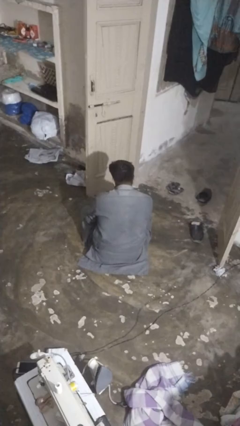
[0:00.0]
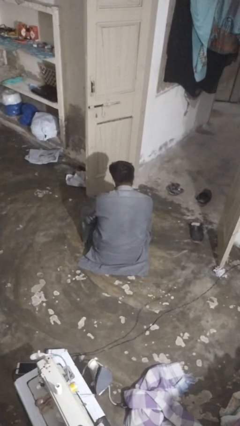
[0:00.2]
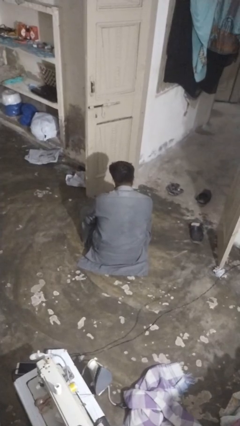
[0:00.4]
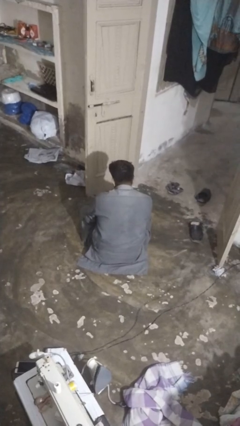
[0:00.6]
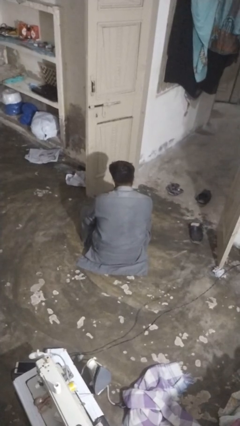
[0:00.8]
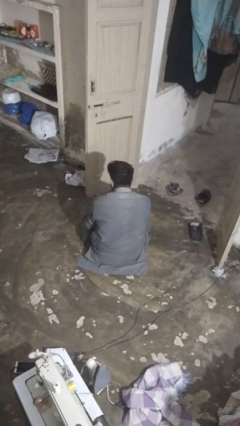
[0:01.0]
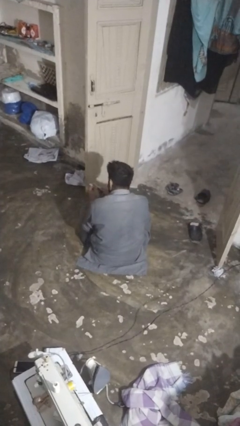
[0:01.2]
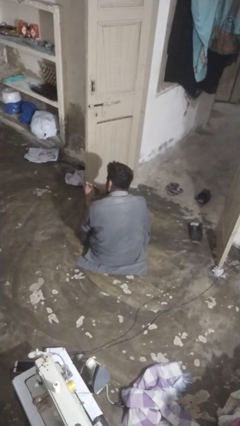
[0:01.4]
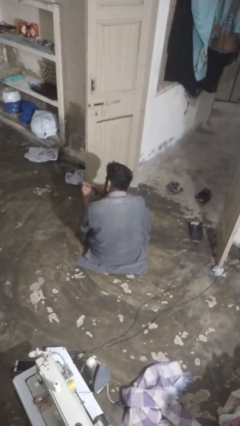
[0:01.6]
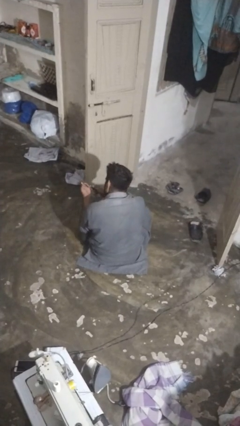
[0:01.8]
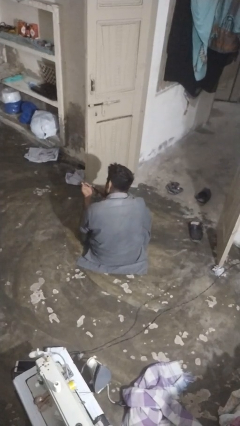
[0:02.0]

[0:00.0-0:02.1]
person files fingernails

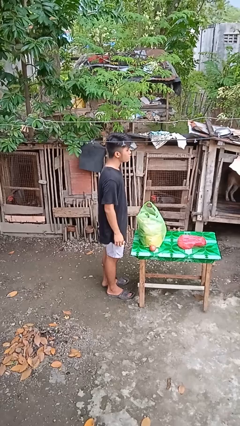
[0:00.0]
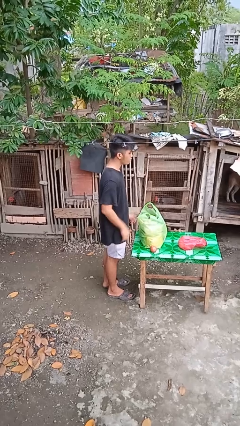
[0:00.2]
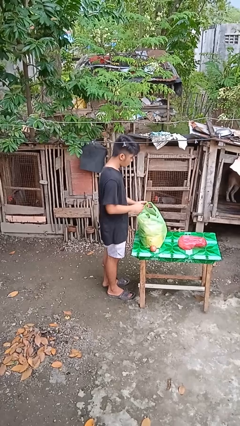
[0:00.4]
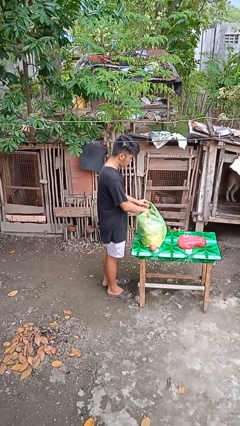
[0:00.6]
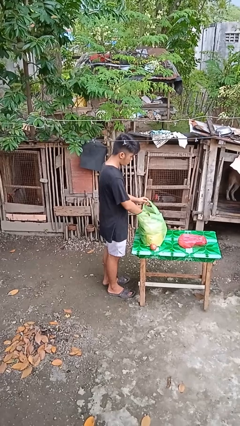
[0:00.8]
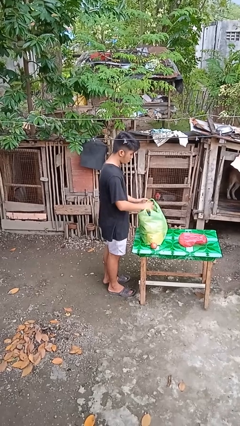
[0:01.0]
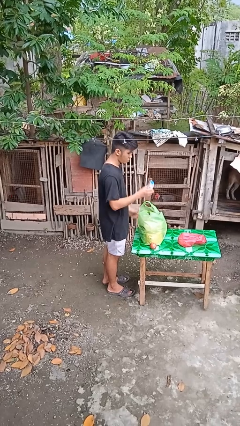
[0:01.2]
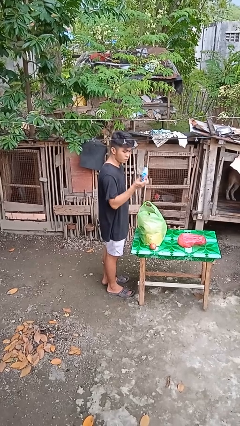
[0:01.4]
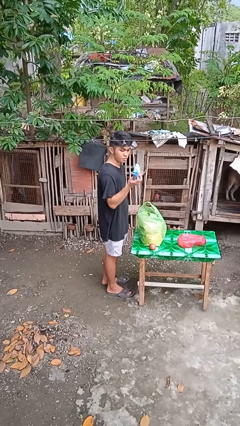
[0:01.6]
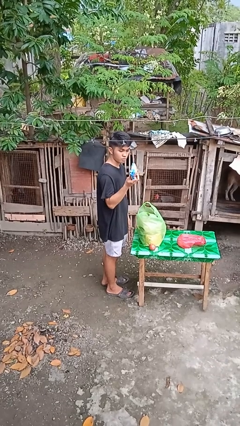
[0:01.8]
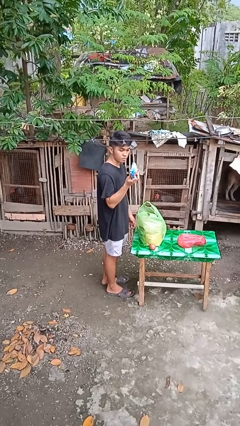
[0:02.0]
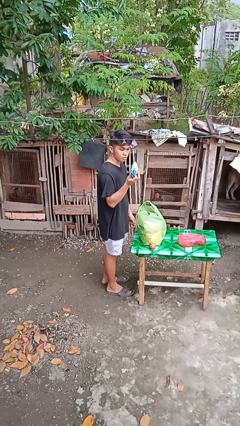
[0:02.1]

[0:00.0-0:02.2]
person takes object from bag

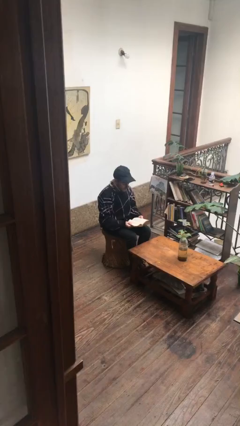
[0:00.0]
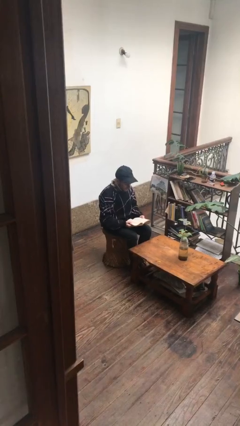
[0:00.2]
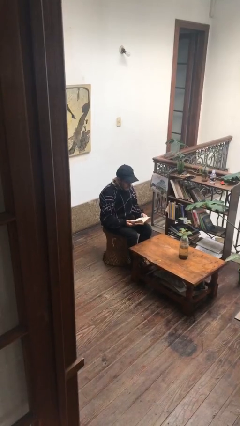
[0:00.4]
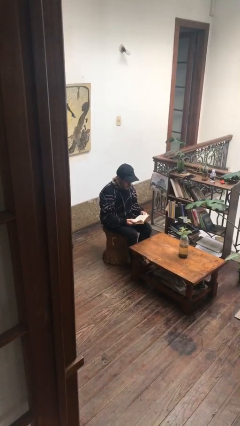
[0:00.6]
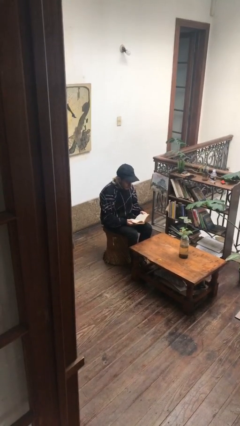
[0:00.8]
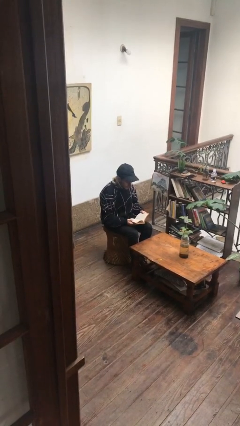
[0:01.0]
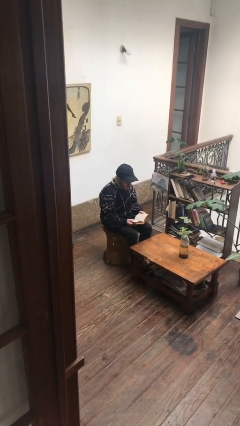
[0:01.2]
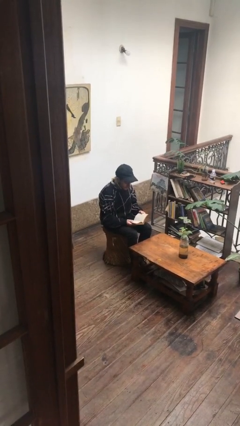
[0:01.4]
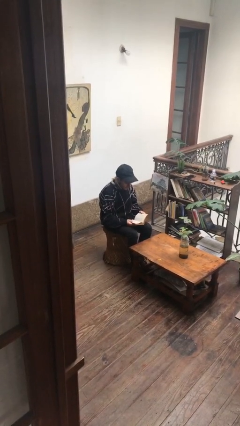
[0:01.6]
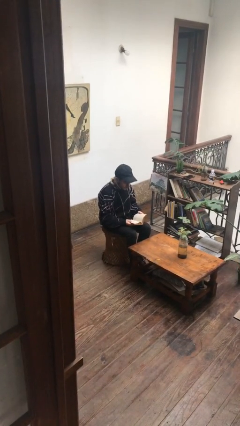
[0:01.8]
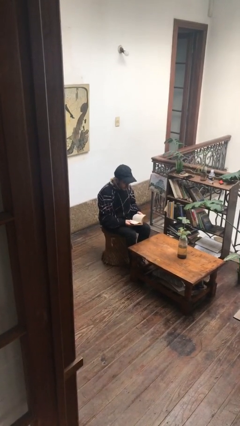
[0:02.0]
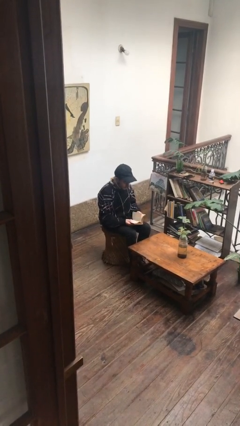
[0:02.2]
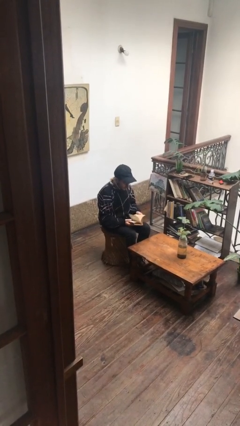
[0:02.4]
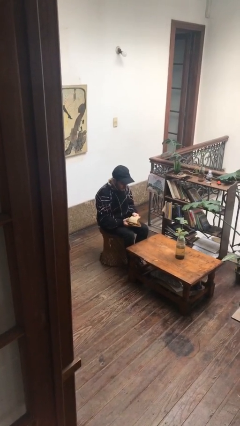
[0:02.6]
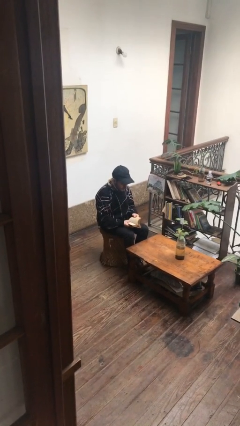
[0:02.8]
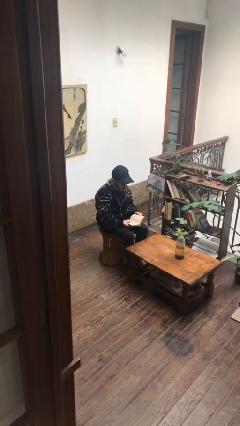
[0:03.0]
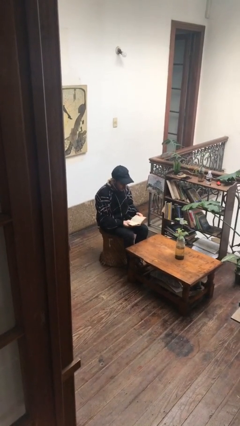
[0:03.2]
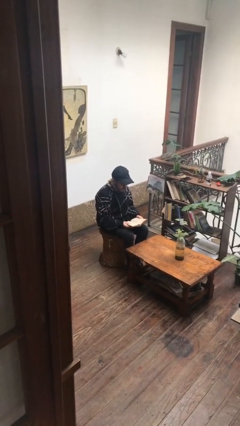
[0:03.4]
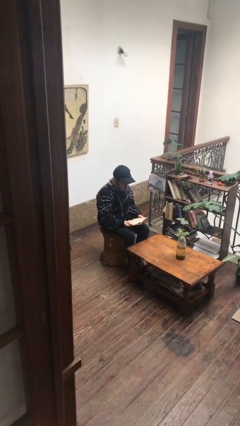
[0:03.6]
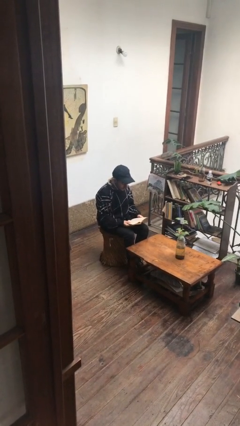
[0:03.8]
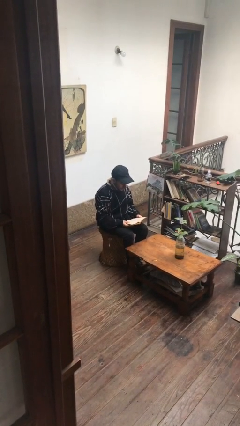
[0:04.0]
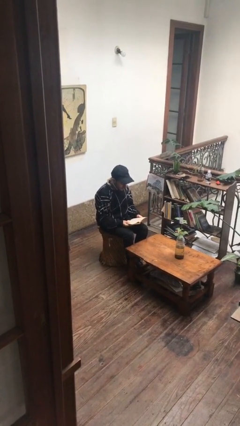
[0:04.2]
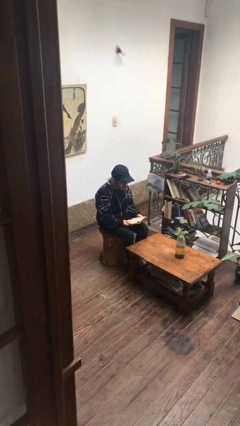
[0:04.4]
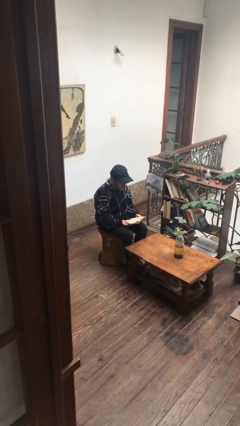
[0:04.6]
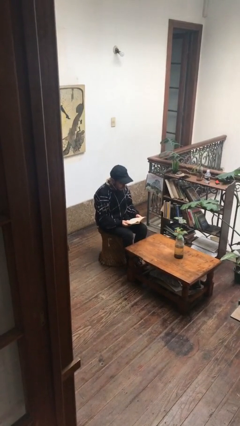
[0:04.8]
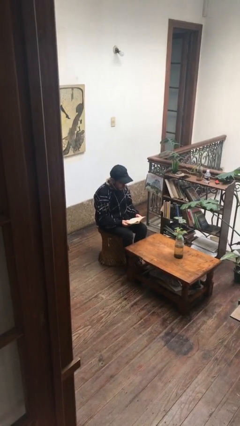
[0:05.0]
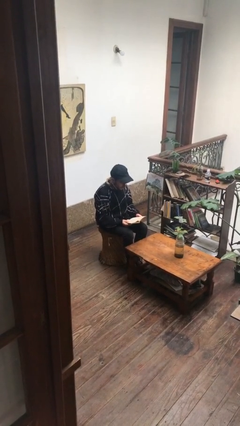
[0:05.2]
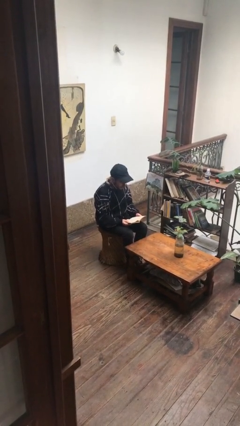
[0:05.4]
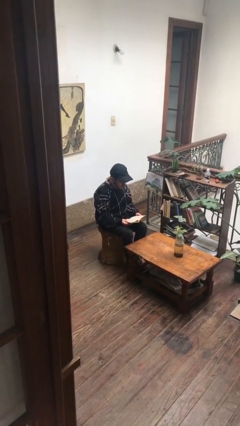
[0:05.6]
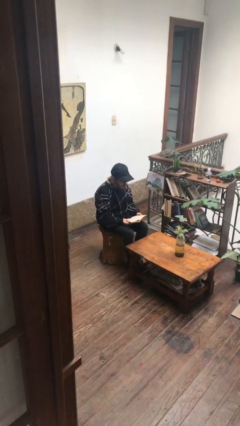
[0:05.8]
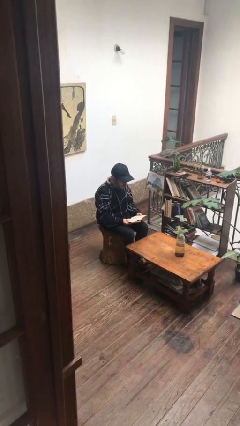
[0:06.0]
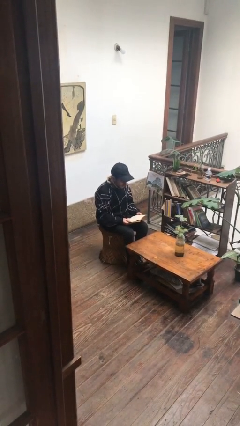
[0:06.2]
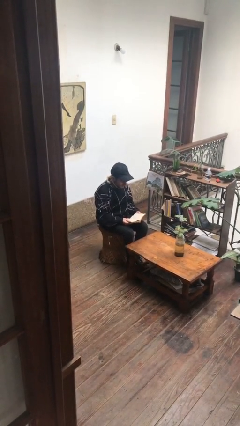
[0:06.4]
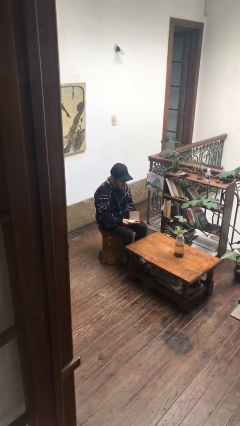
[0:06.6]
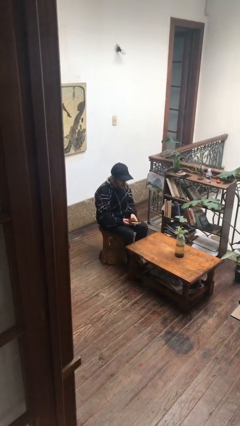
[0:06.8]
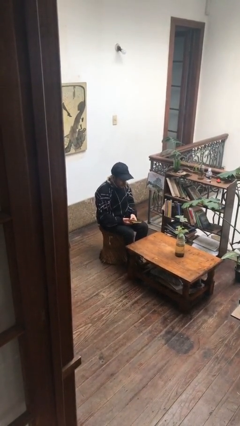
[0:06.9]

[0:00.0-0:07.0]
person reads document

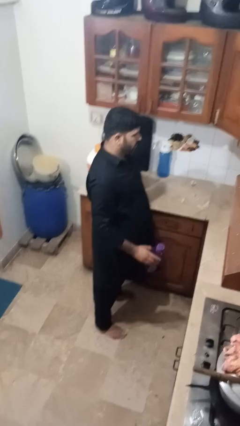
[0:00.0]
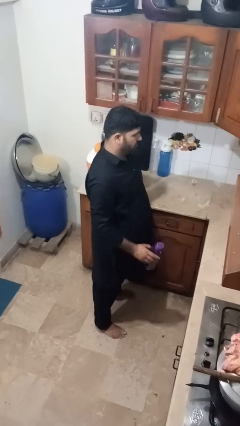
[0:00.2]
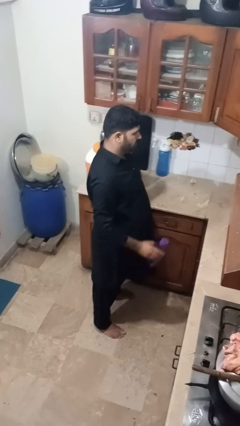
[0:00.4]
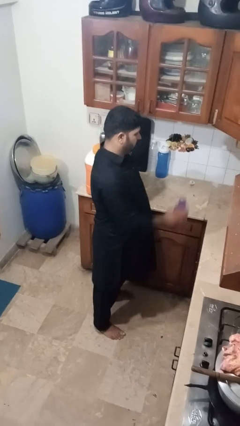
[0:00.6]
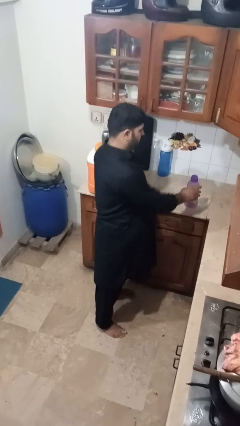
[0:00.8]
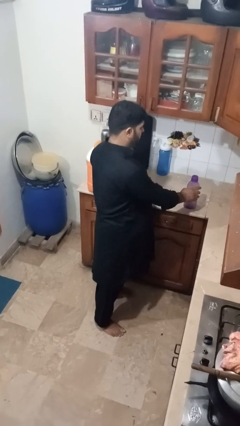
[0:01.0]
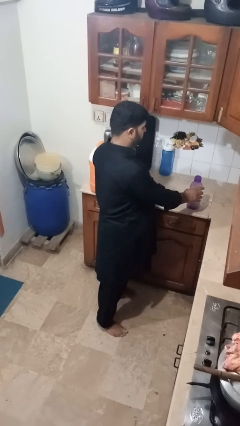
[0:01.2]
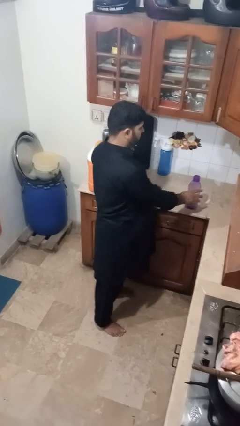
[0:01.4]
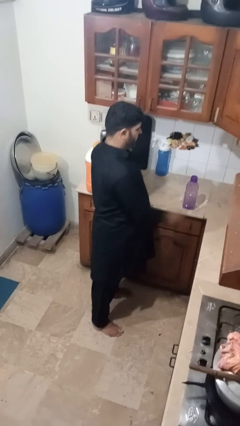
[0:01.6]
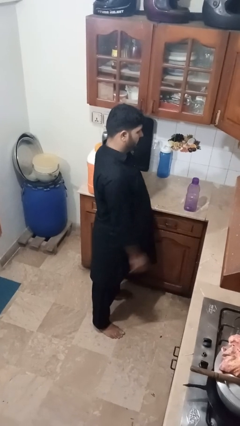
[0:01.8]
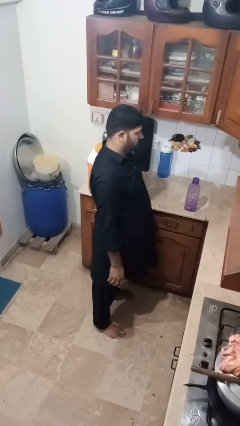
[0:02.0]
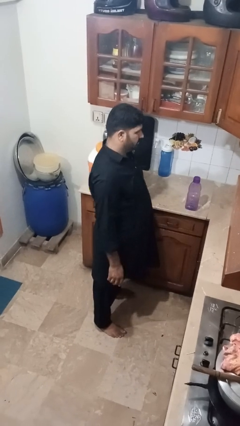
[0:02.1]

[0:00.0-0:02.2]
person puts down object on countertop

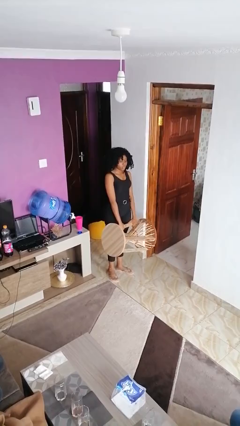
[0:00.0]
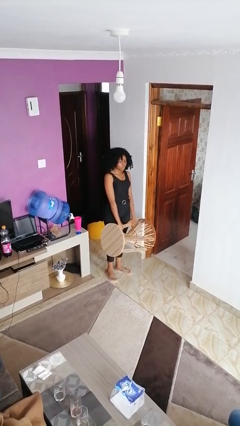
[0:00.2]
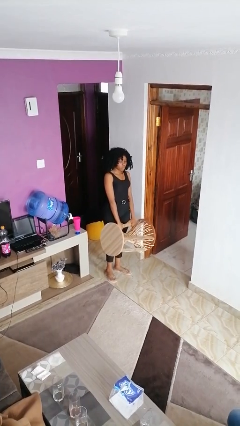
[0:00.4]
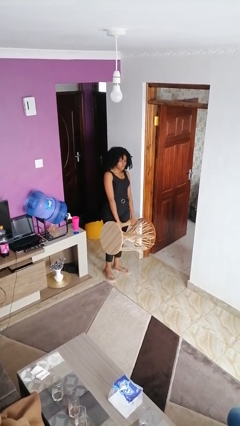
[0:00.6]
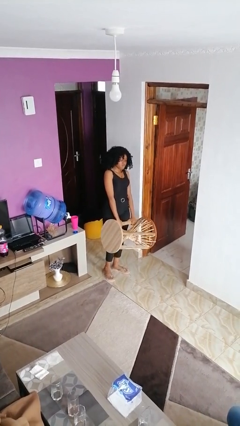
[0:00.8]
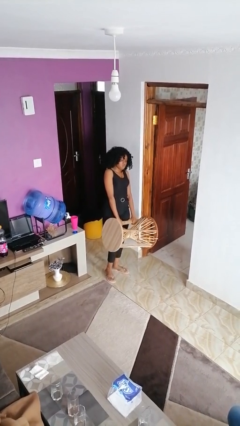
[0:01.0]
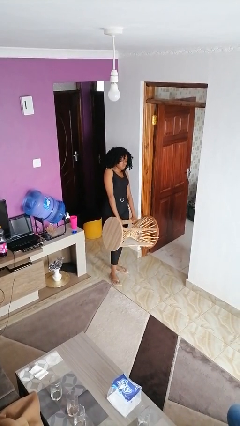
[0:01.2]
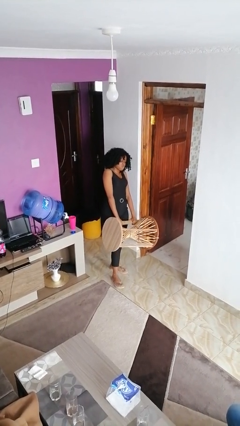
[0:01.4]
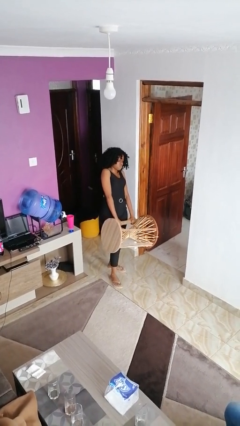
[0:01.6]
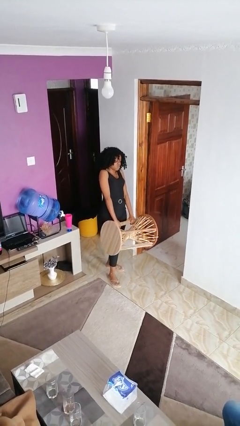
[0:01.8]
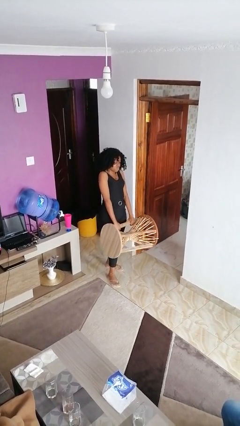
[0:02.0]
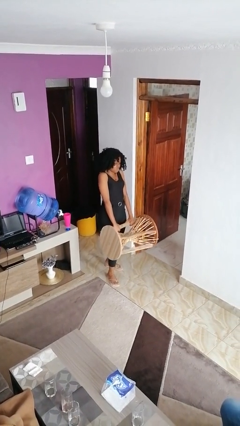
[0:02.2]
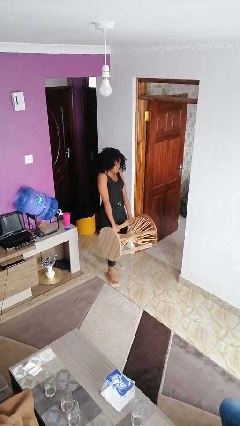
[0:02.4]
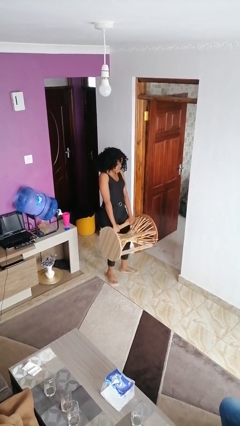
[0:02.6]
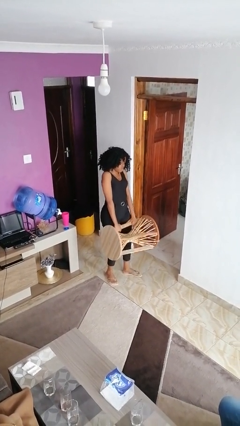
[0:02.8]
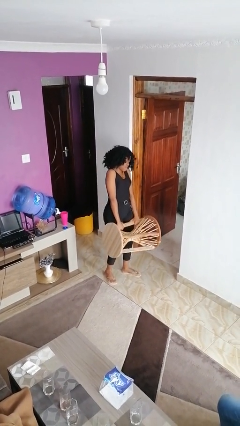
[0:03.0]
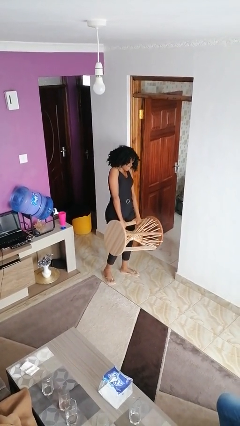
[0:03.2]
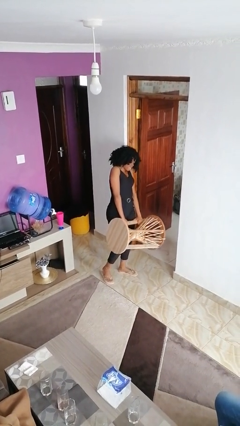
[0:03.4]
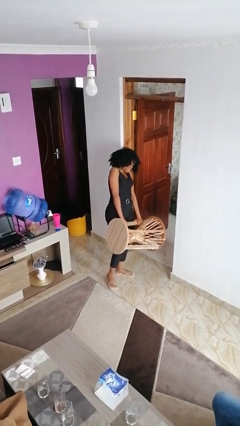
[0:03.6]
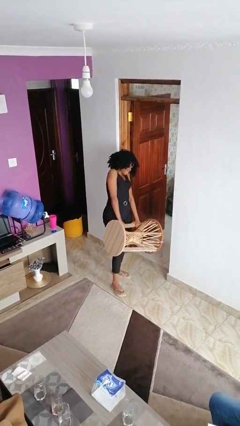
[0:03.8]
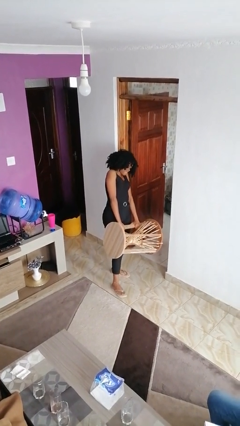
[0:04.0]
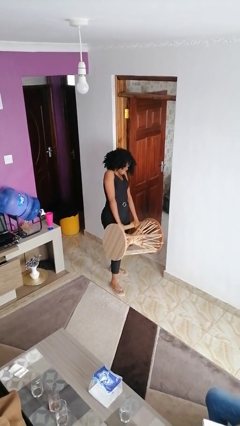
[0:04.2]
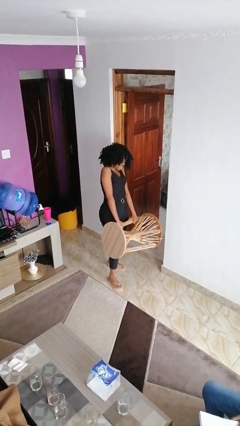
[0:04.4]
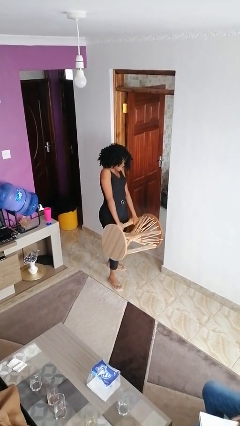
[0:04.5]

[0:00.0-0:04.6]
person carries furniture
